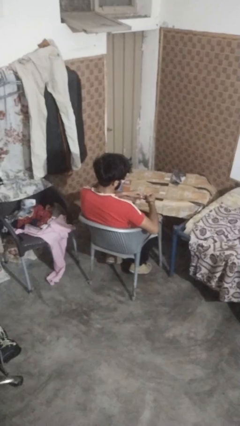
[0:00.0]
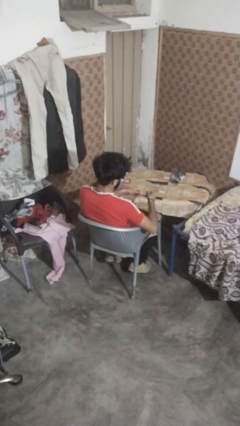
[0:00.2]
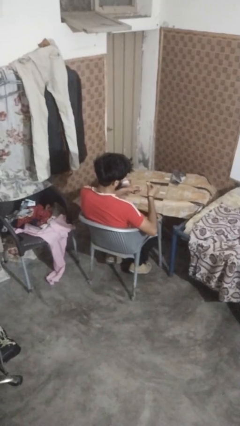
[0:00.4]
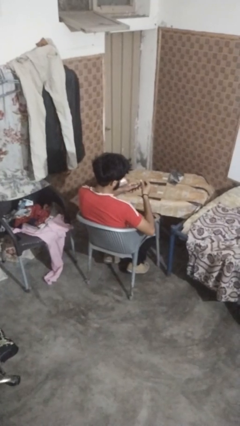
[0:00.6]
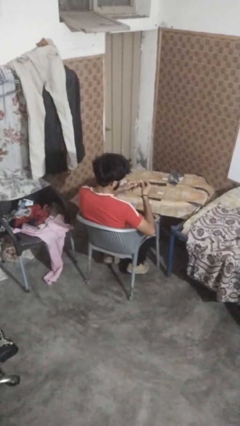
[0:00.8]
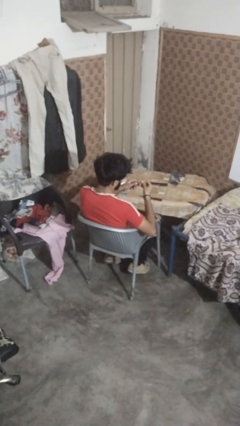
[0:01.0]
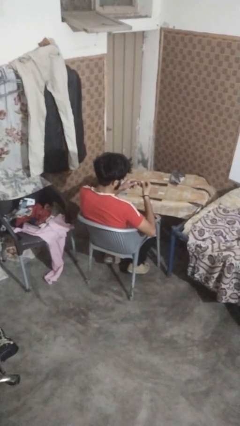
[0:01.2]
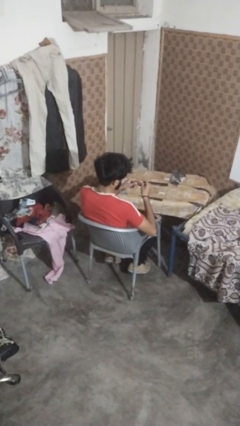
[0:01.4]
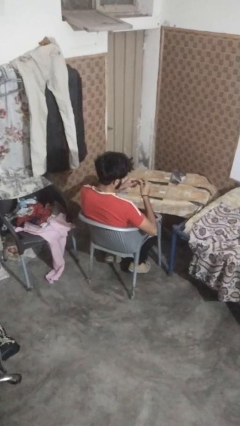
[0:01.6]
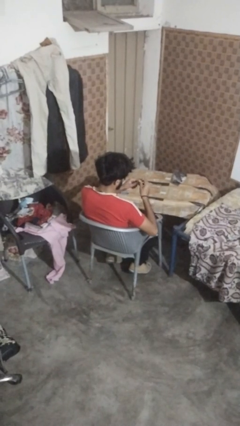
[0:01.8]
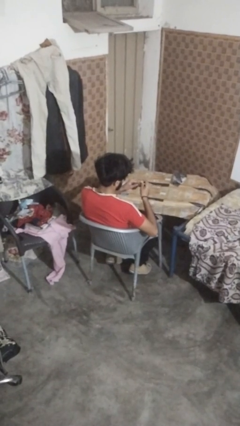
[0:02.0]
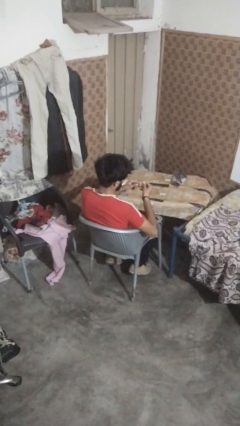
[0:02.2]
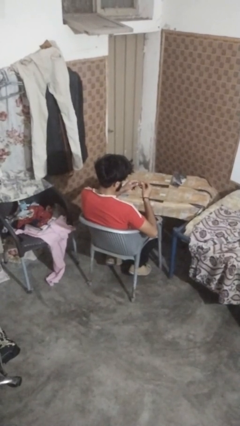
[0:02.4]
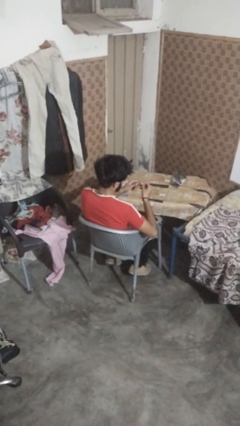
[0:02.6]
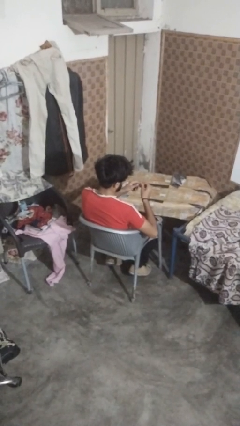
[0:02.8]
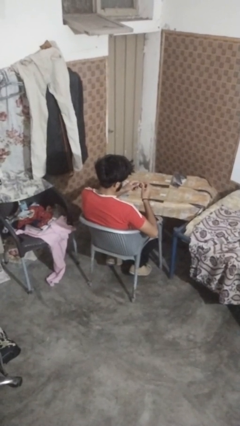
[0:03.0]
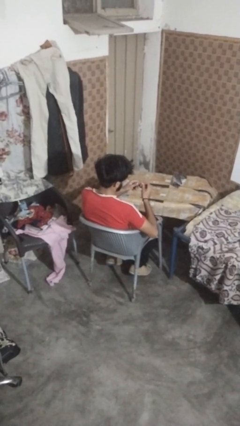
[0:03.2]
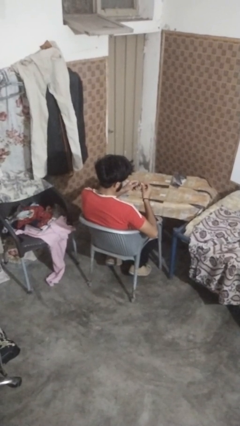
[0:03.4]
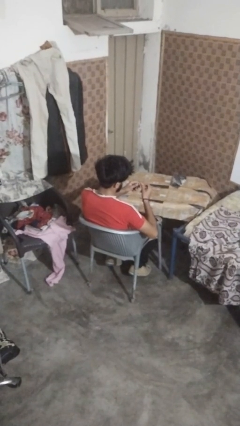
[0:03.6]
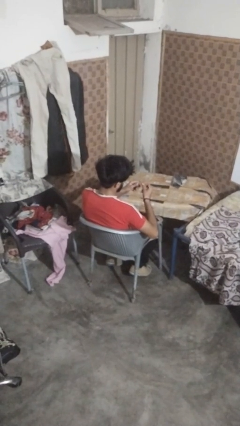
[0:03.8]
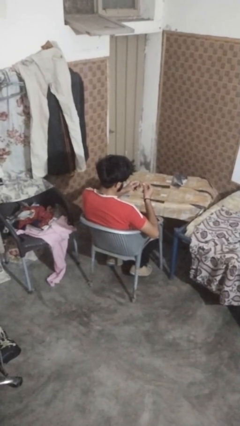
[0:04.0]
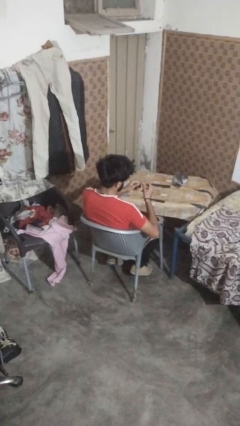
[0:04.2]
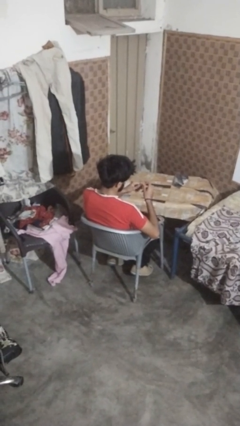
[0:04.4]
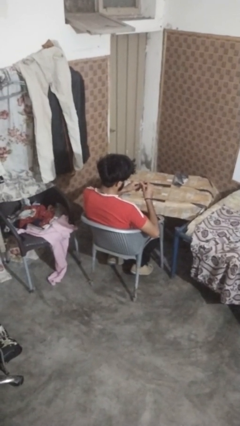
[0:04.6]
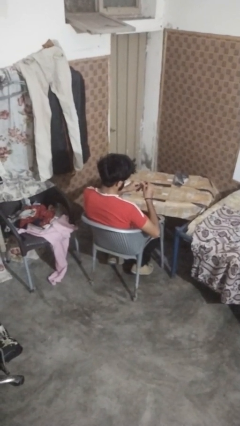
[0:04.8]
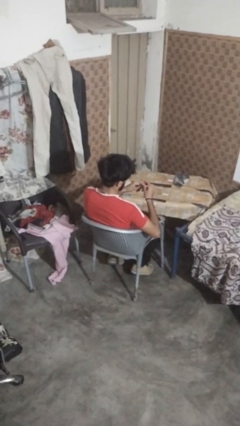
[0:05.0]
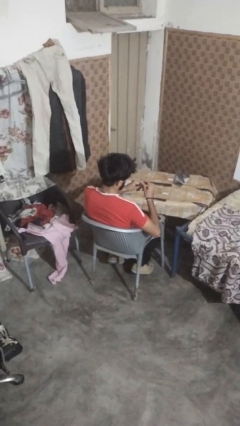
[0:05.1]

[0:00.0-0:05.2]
person clips fingernails

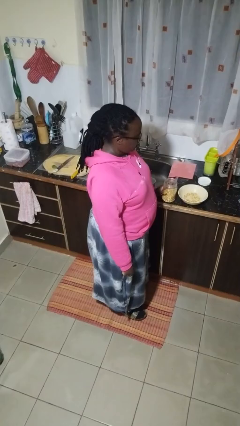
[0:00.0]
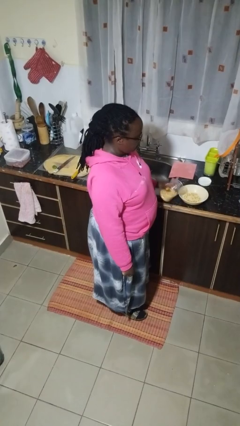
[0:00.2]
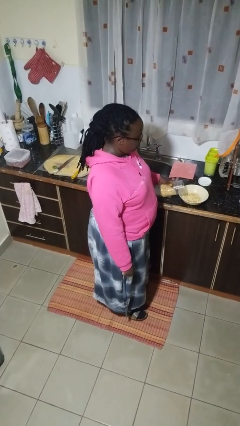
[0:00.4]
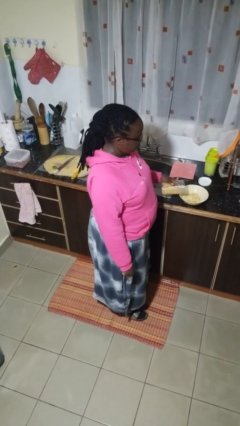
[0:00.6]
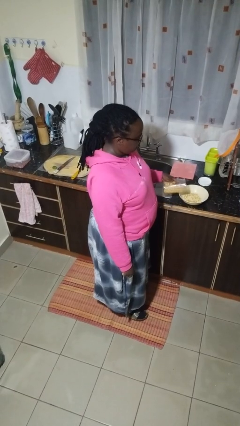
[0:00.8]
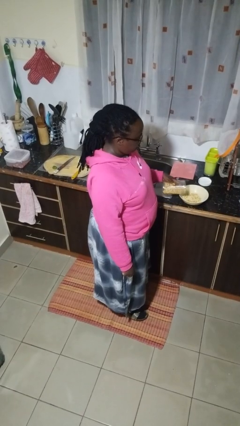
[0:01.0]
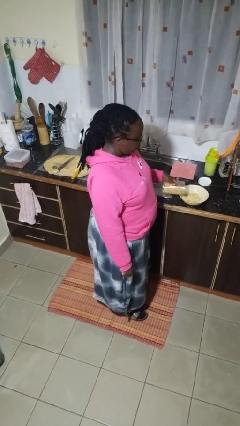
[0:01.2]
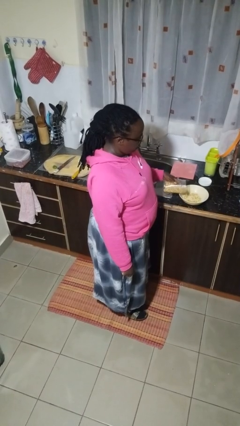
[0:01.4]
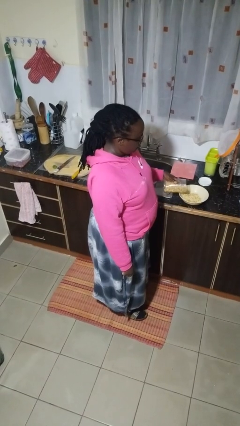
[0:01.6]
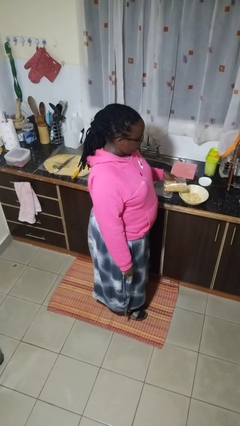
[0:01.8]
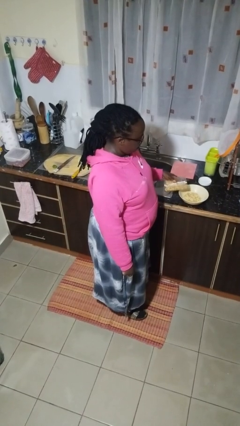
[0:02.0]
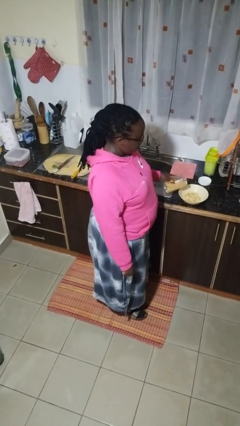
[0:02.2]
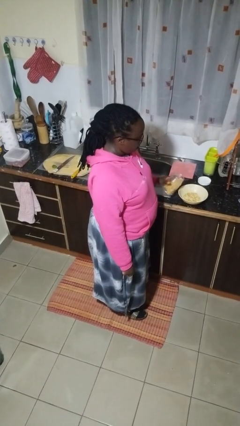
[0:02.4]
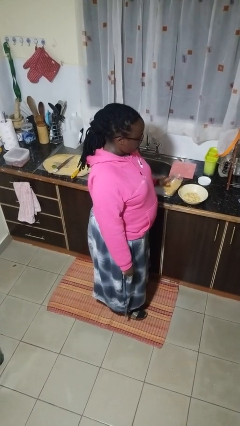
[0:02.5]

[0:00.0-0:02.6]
person pours into bowl

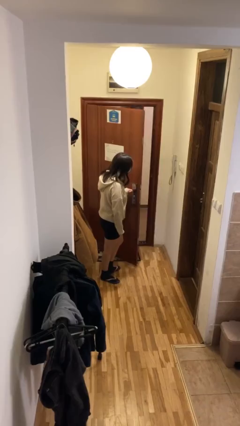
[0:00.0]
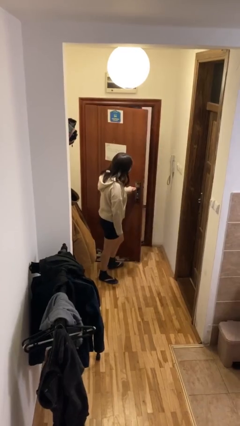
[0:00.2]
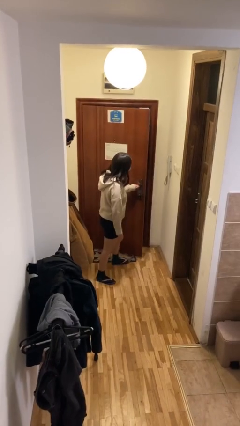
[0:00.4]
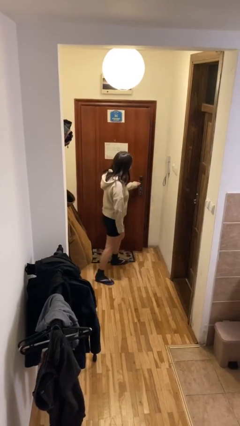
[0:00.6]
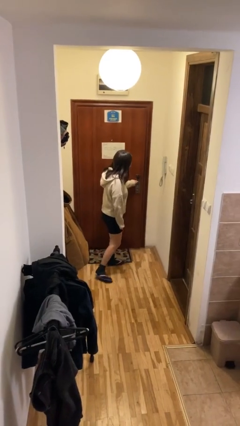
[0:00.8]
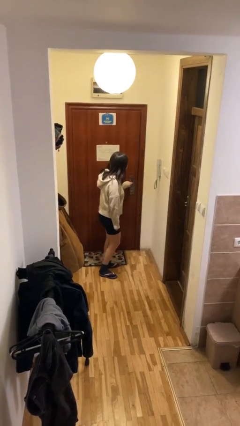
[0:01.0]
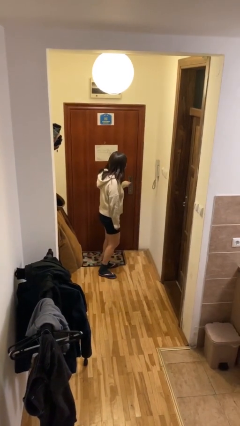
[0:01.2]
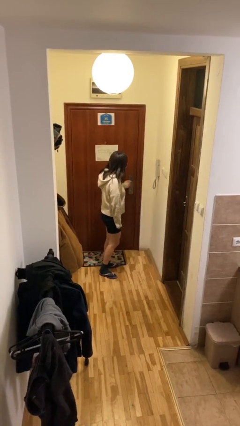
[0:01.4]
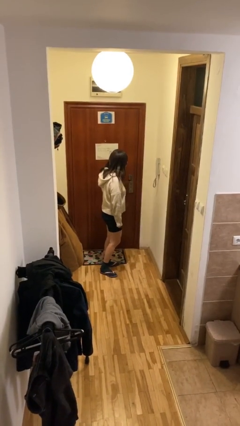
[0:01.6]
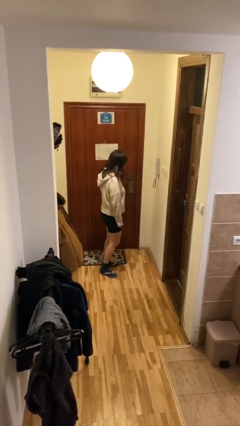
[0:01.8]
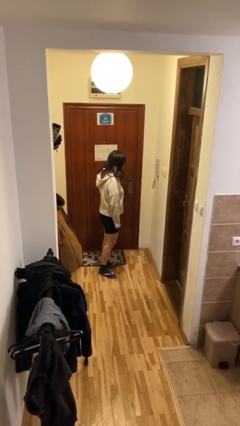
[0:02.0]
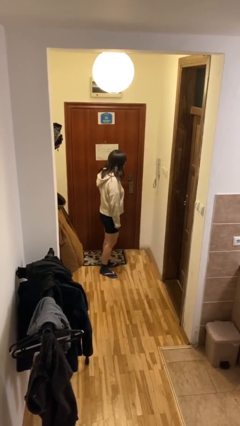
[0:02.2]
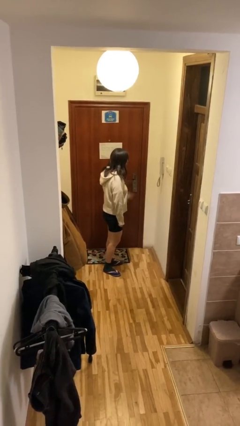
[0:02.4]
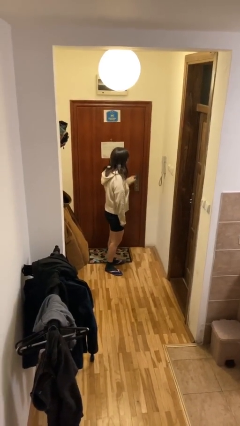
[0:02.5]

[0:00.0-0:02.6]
person closes facility door

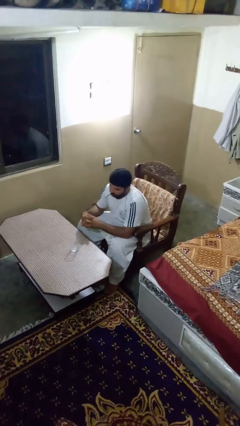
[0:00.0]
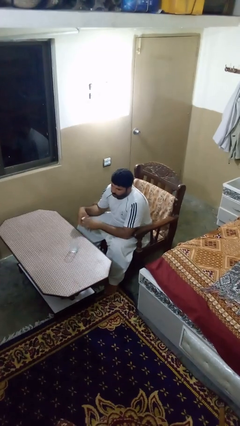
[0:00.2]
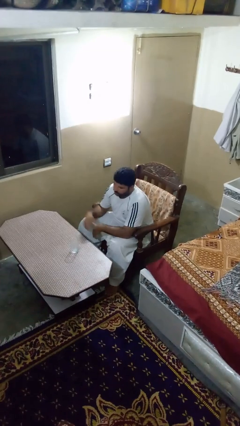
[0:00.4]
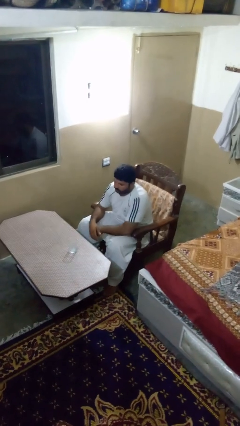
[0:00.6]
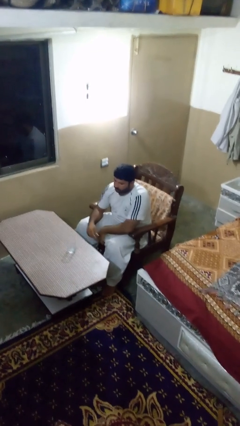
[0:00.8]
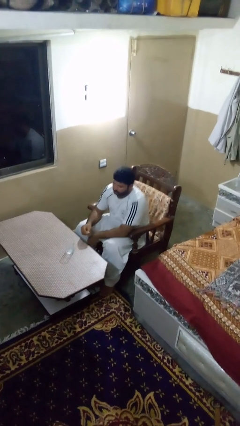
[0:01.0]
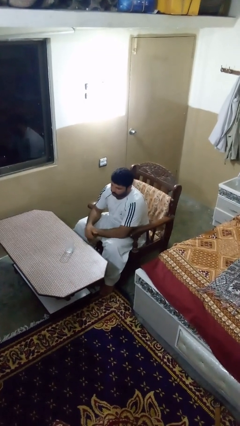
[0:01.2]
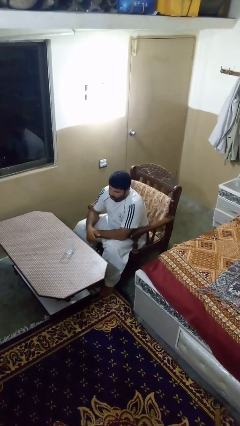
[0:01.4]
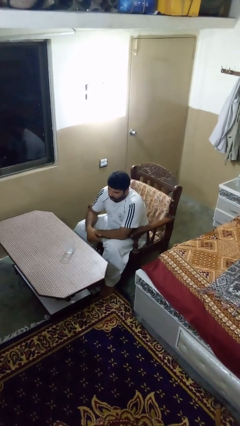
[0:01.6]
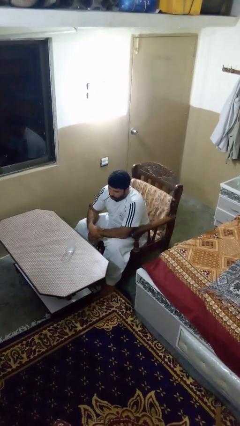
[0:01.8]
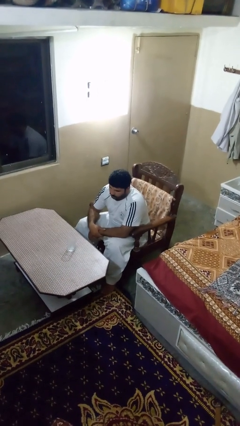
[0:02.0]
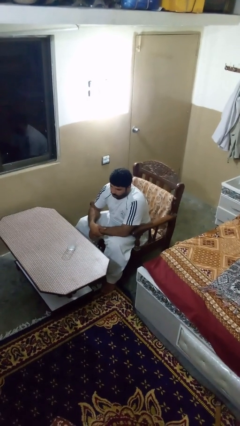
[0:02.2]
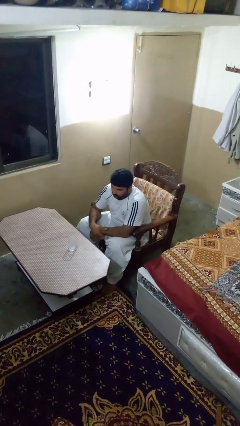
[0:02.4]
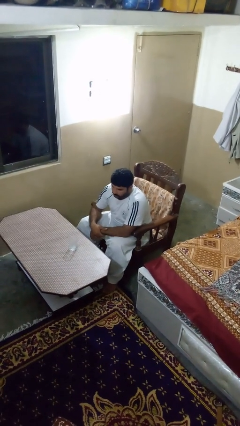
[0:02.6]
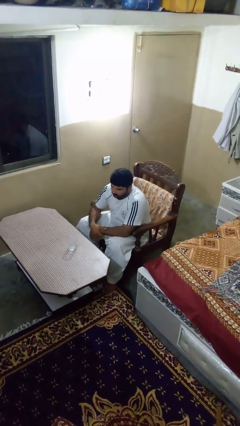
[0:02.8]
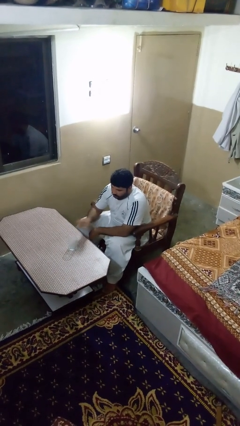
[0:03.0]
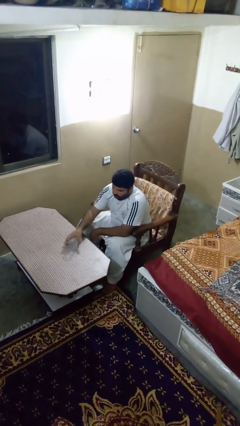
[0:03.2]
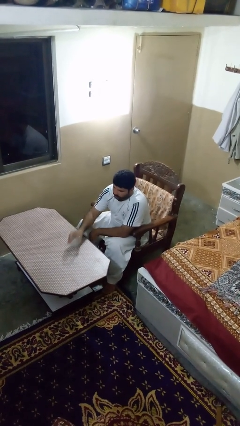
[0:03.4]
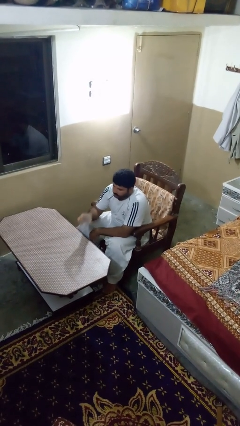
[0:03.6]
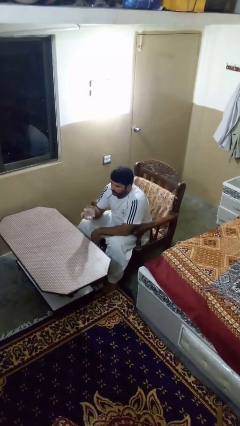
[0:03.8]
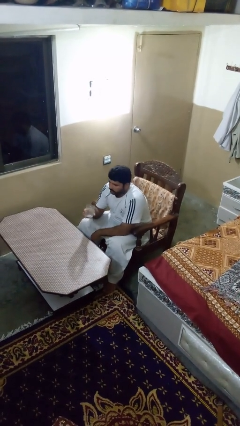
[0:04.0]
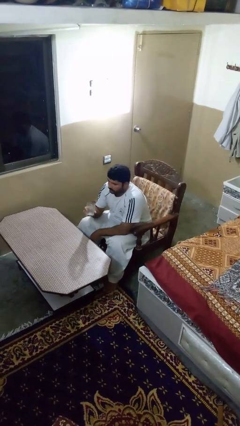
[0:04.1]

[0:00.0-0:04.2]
person picks up object from table

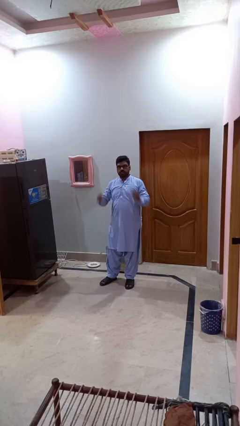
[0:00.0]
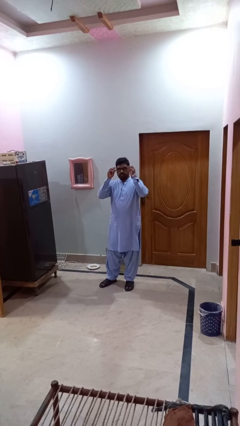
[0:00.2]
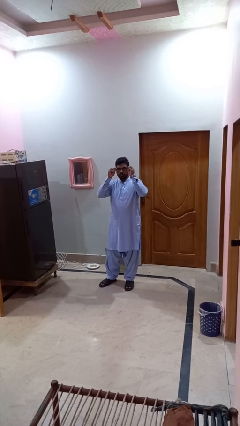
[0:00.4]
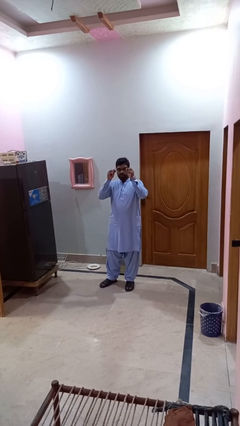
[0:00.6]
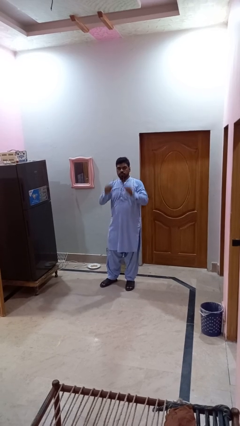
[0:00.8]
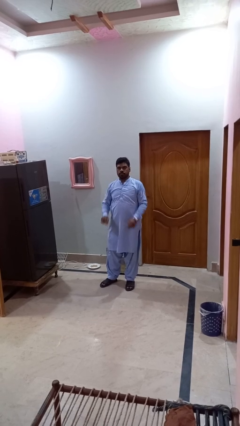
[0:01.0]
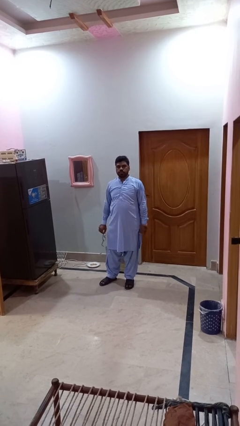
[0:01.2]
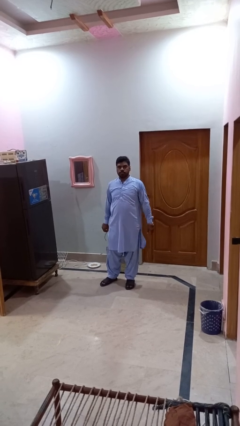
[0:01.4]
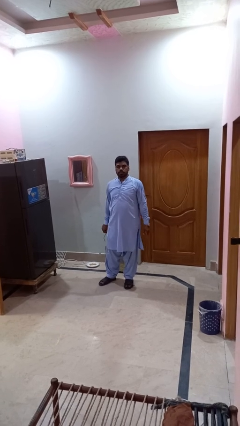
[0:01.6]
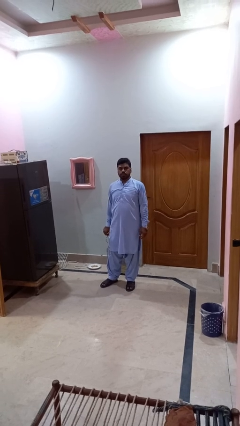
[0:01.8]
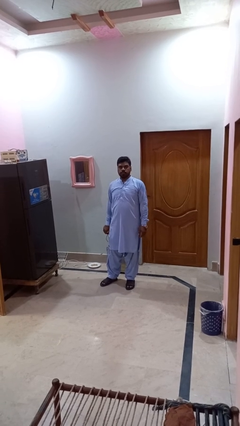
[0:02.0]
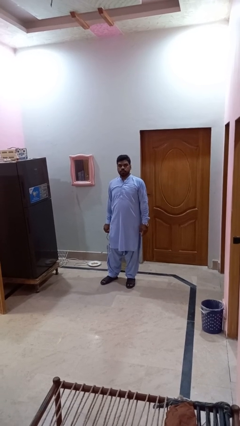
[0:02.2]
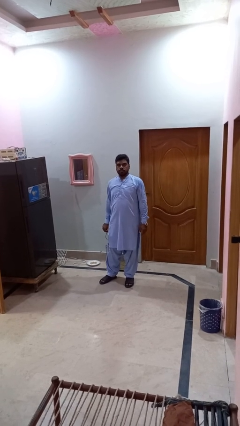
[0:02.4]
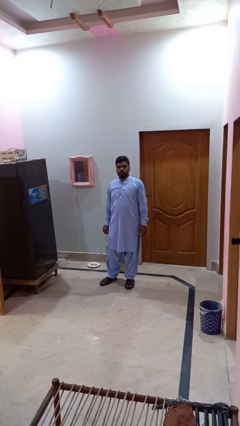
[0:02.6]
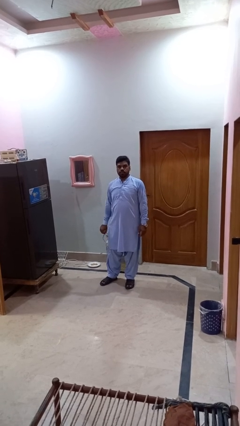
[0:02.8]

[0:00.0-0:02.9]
person takes off glasses

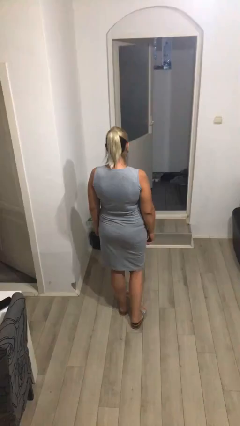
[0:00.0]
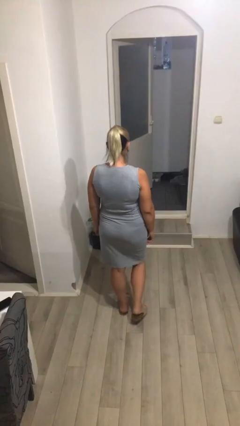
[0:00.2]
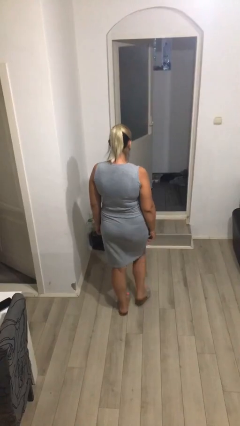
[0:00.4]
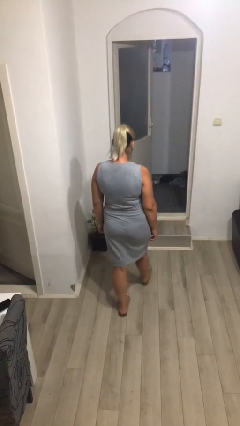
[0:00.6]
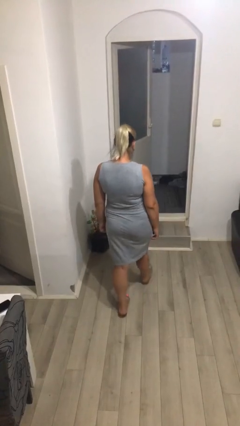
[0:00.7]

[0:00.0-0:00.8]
person exits scene through structure
